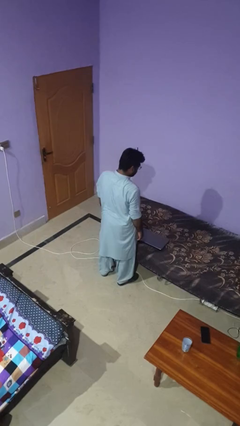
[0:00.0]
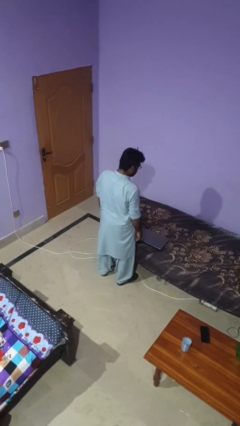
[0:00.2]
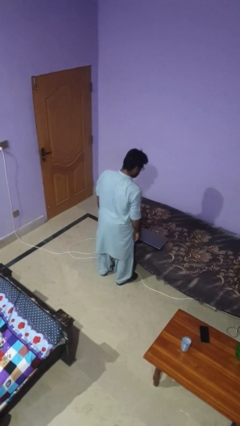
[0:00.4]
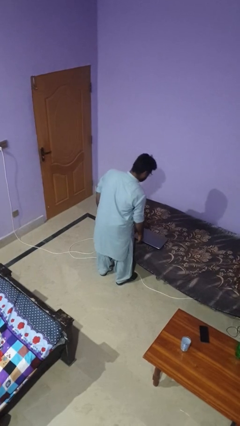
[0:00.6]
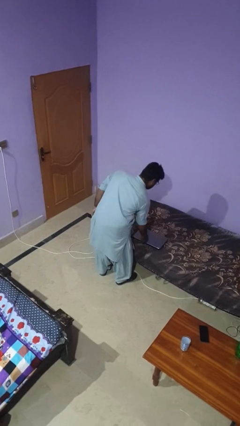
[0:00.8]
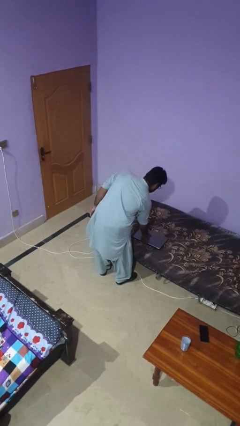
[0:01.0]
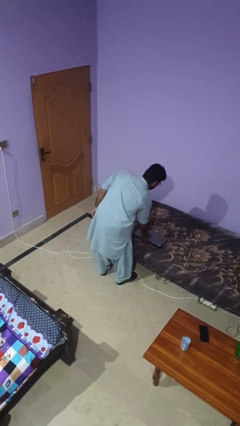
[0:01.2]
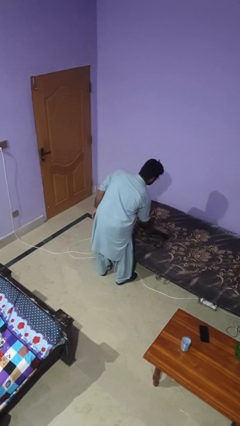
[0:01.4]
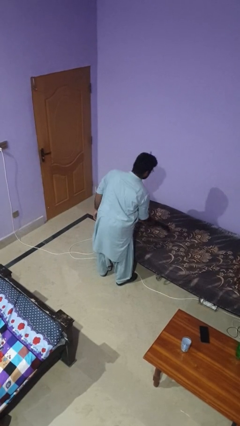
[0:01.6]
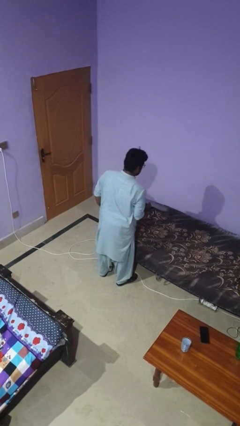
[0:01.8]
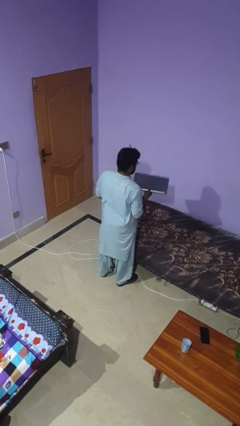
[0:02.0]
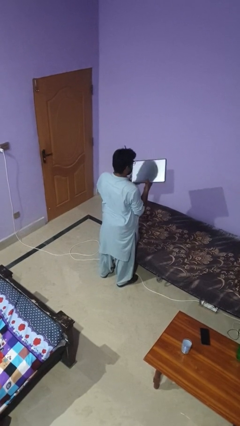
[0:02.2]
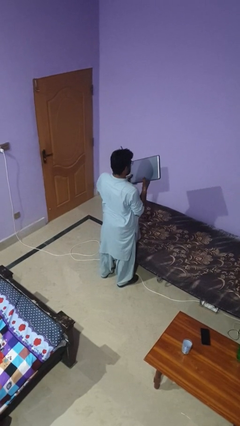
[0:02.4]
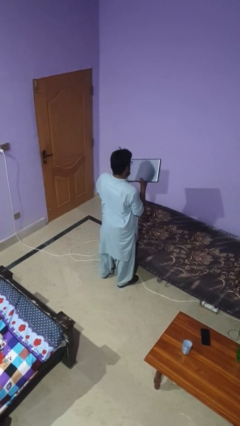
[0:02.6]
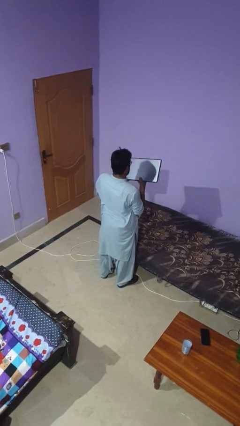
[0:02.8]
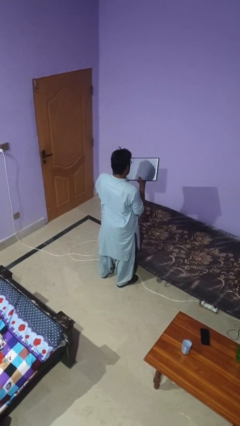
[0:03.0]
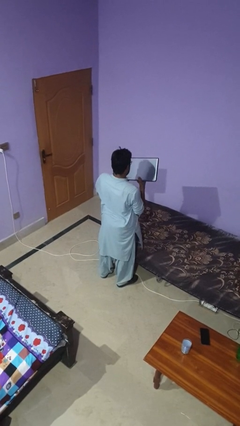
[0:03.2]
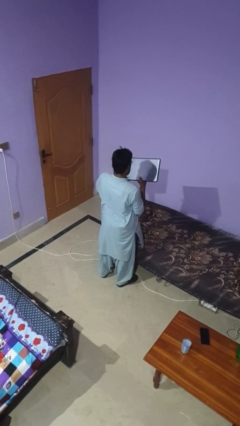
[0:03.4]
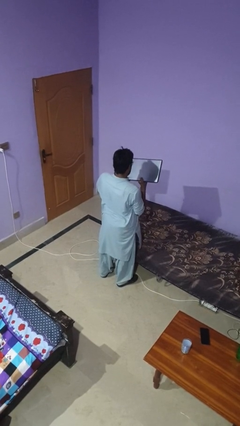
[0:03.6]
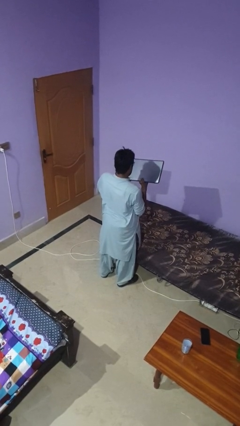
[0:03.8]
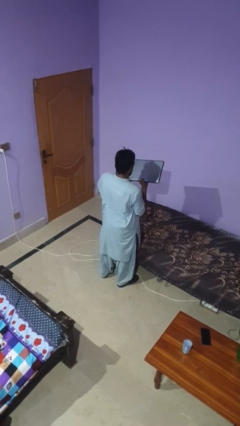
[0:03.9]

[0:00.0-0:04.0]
person picks up object from bed

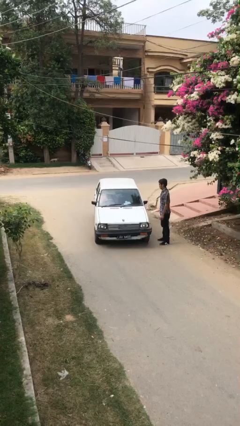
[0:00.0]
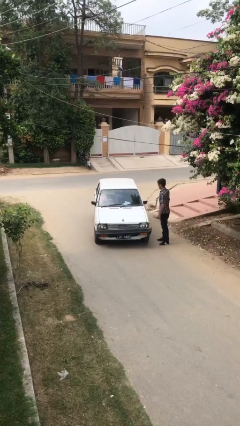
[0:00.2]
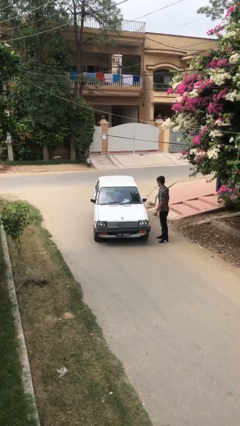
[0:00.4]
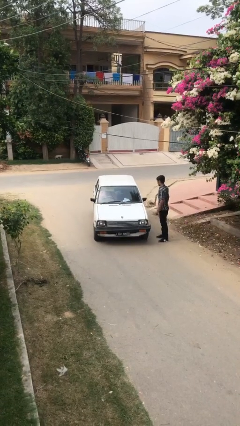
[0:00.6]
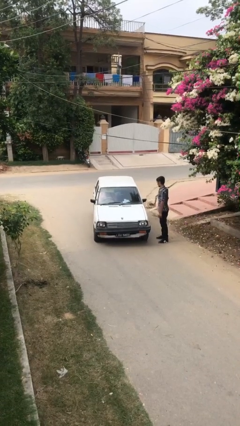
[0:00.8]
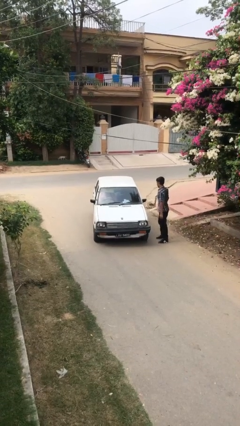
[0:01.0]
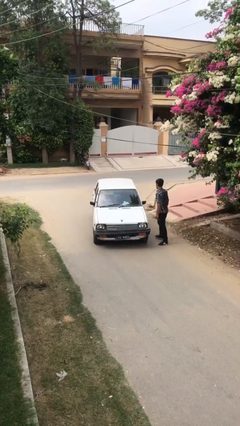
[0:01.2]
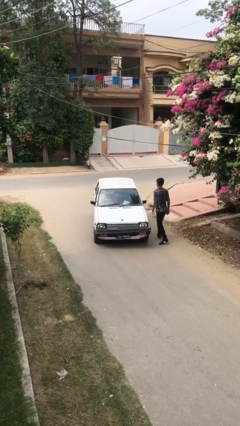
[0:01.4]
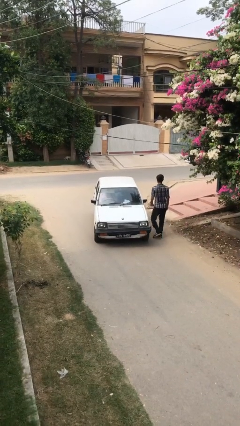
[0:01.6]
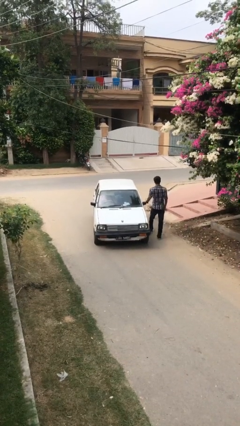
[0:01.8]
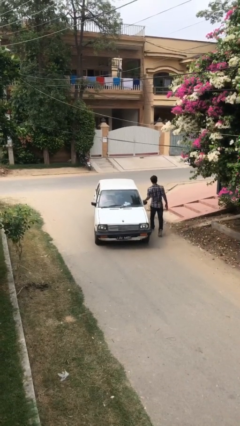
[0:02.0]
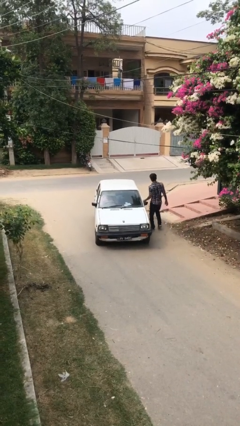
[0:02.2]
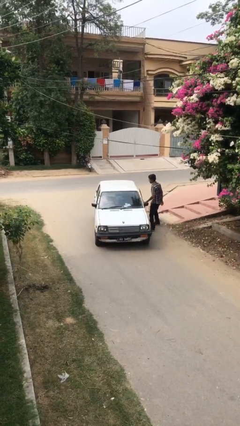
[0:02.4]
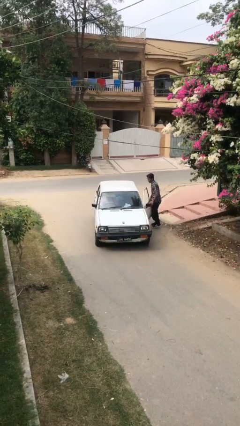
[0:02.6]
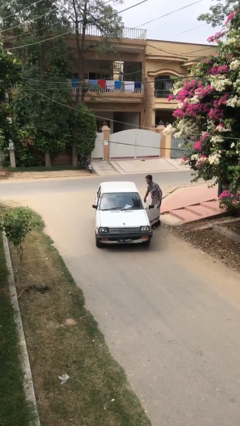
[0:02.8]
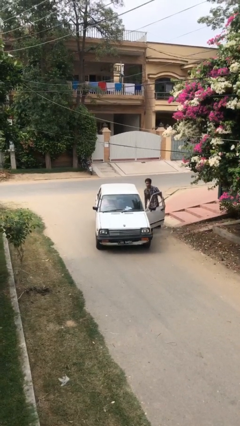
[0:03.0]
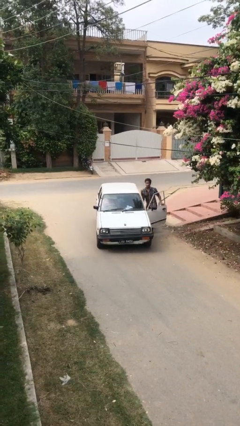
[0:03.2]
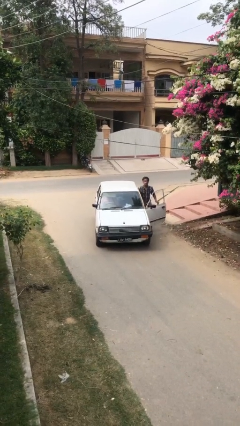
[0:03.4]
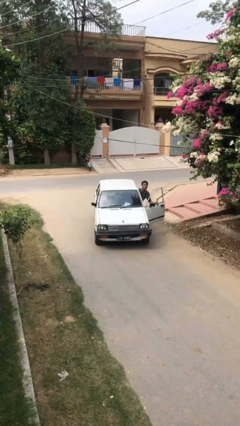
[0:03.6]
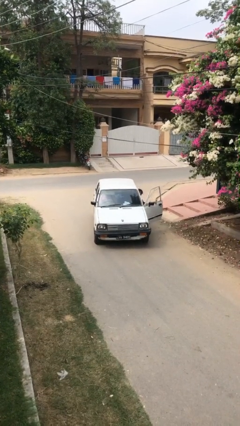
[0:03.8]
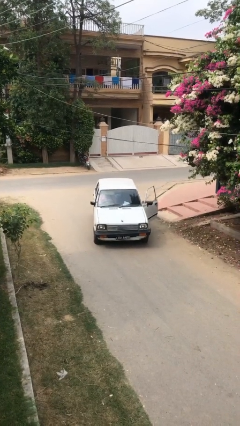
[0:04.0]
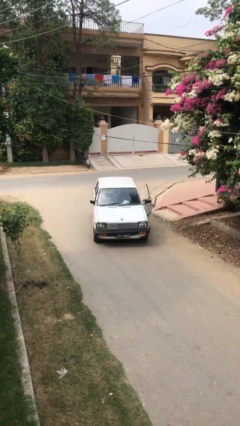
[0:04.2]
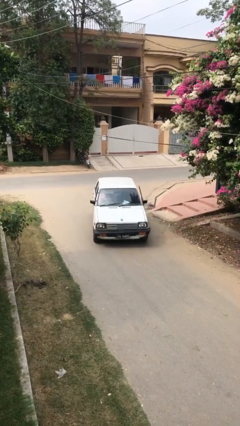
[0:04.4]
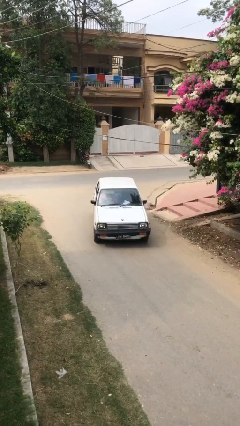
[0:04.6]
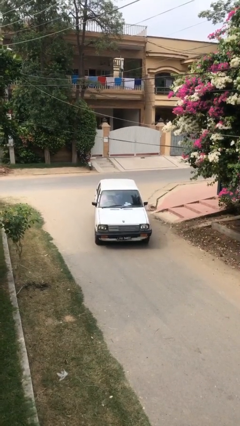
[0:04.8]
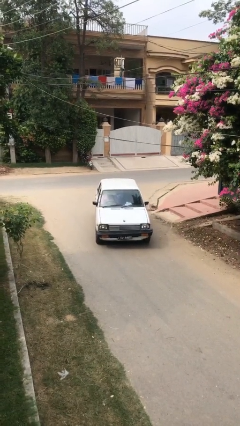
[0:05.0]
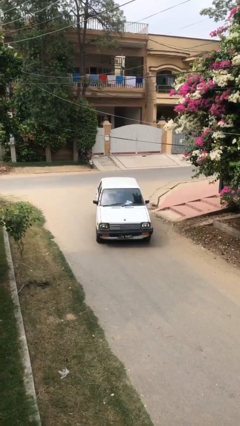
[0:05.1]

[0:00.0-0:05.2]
car picks up person

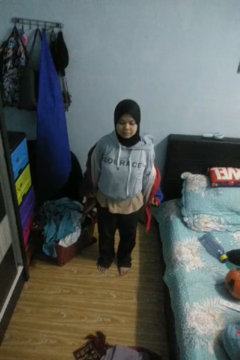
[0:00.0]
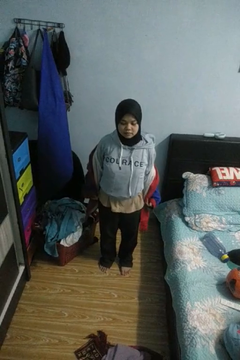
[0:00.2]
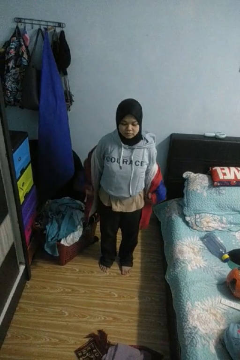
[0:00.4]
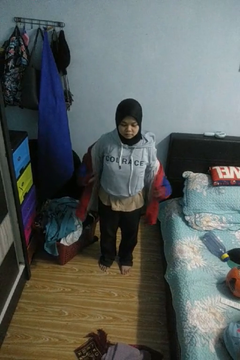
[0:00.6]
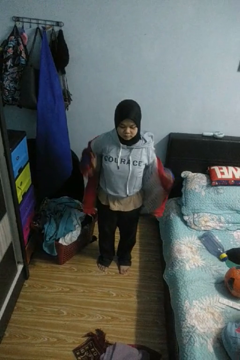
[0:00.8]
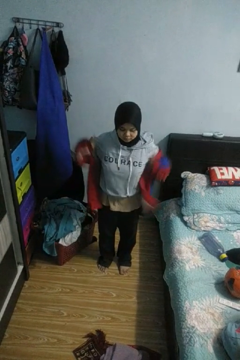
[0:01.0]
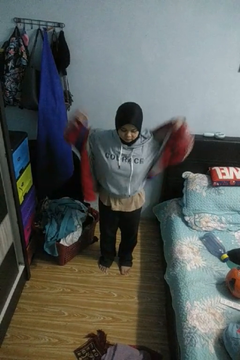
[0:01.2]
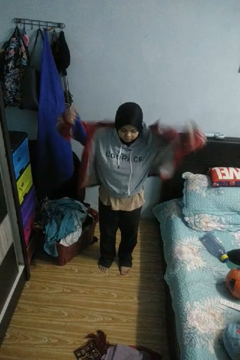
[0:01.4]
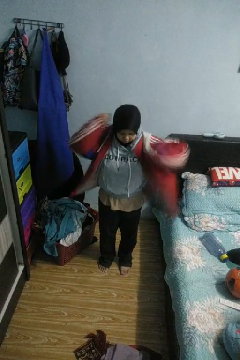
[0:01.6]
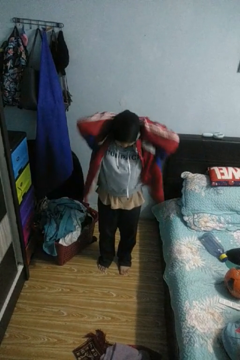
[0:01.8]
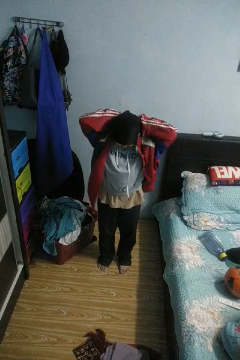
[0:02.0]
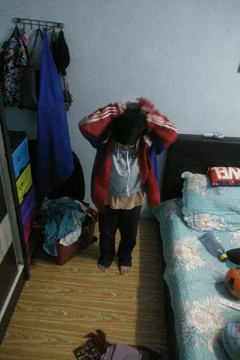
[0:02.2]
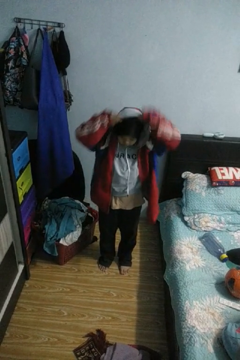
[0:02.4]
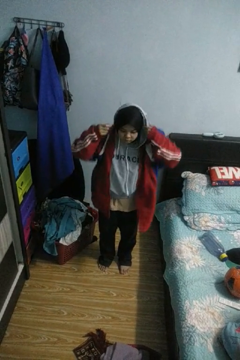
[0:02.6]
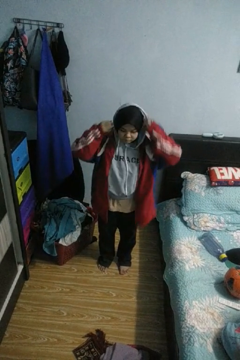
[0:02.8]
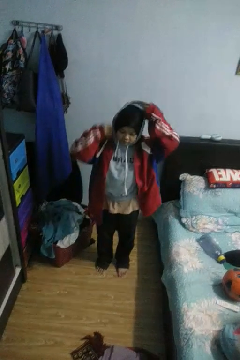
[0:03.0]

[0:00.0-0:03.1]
person puts on hoodie

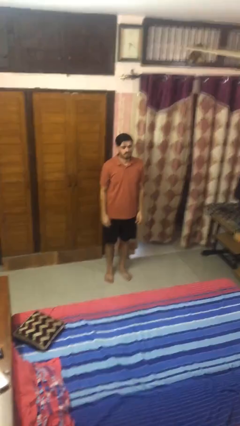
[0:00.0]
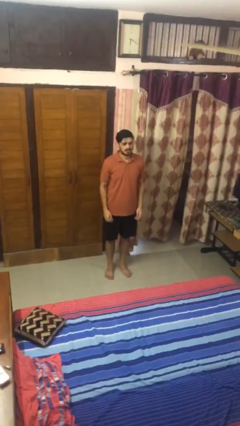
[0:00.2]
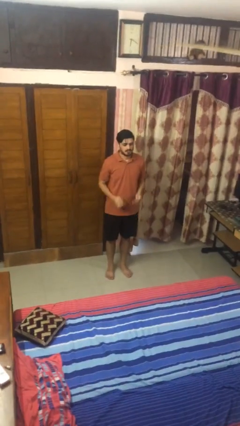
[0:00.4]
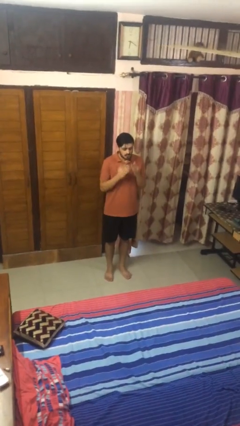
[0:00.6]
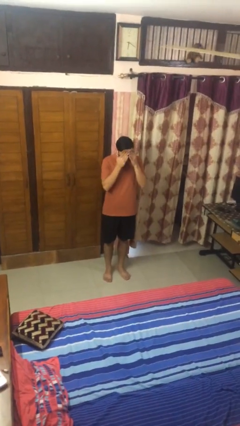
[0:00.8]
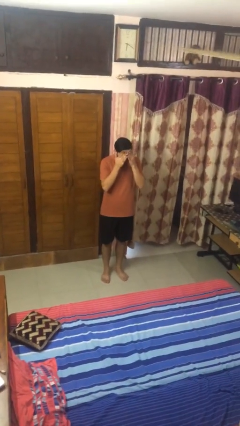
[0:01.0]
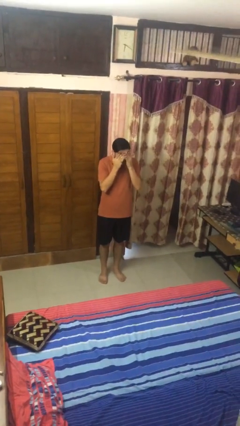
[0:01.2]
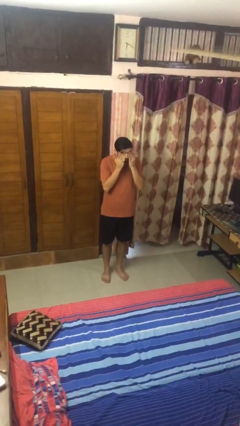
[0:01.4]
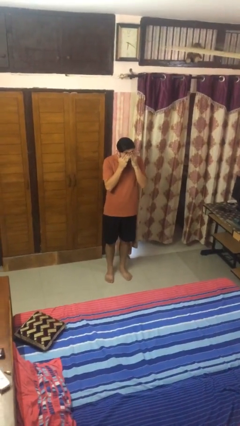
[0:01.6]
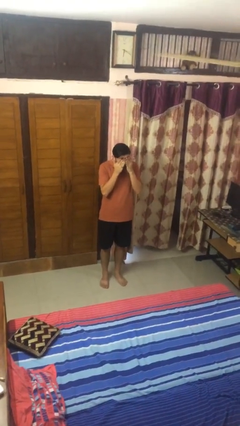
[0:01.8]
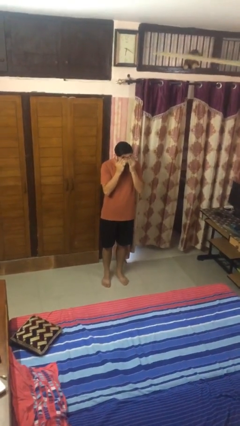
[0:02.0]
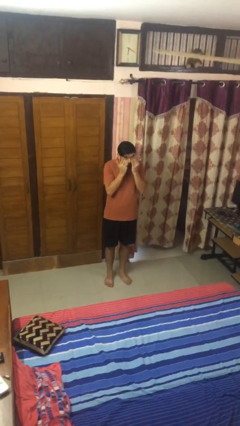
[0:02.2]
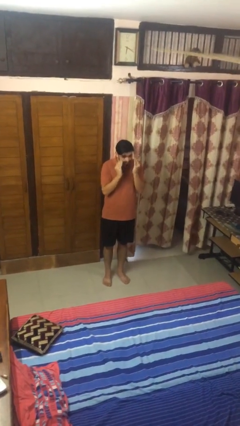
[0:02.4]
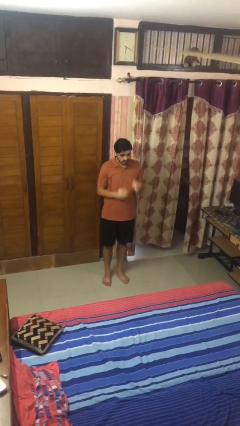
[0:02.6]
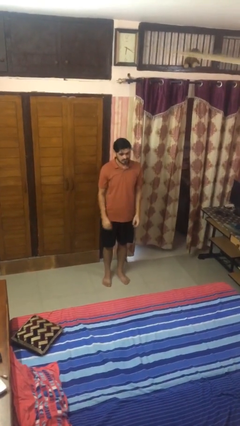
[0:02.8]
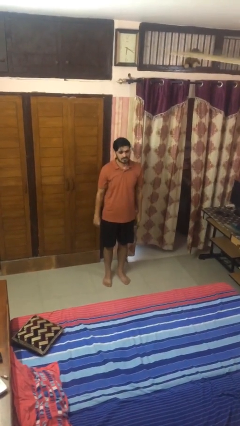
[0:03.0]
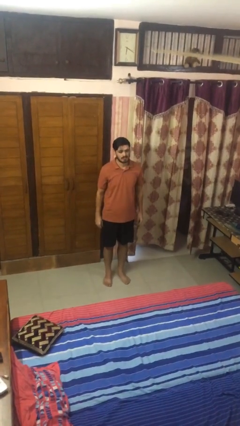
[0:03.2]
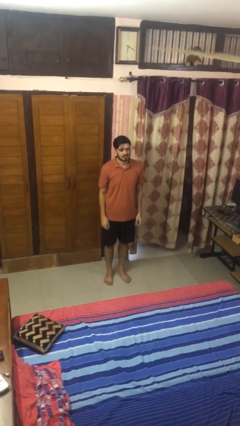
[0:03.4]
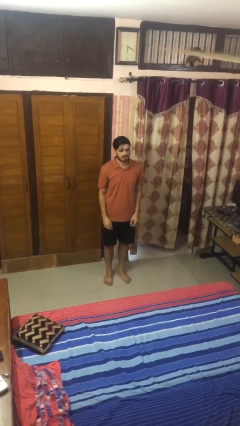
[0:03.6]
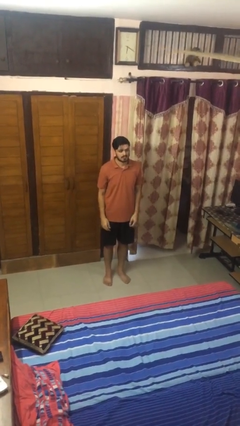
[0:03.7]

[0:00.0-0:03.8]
person rubs eyes

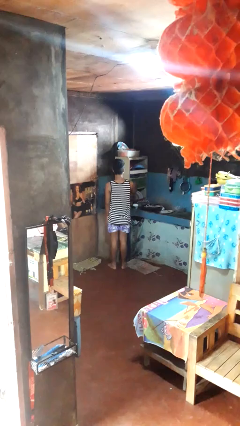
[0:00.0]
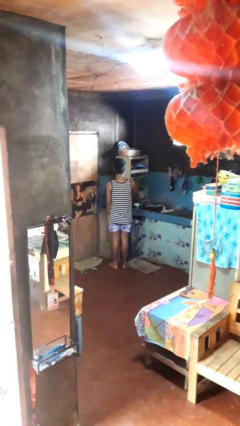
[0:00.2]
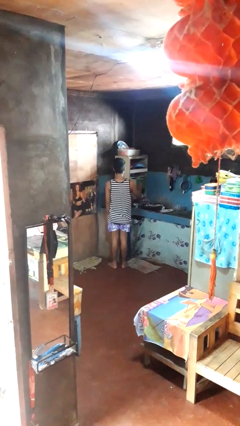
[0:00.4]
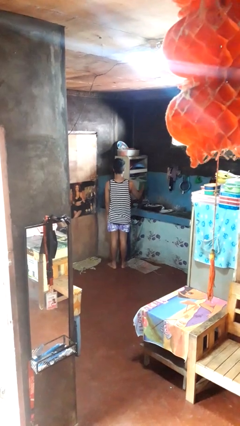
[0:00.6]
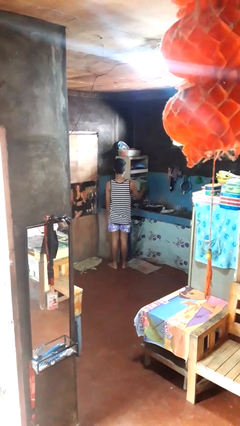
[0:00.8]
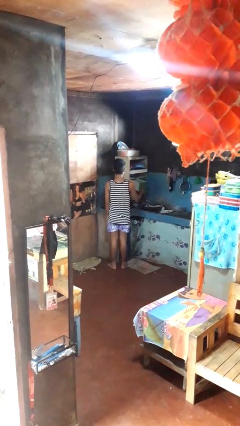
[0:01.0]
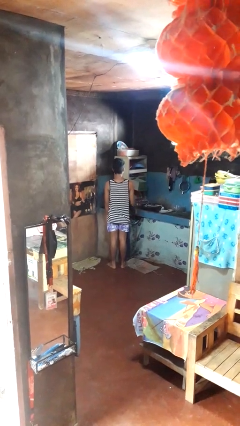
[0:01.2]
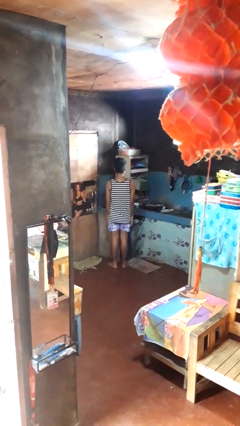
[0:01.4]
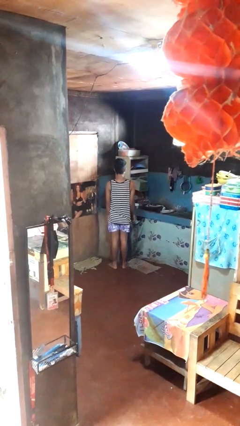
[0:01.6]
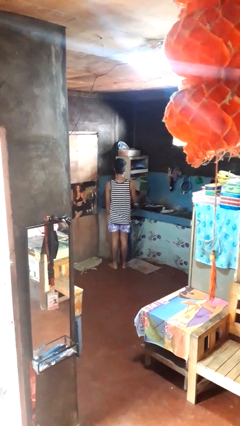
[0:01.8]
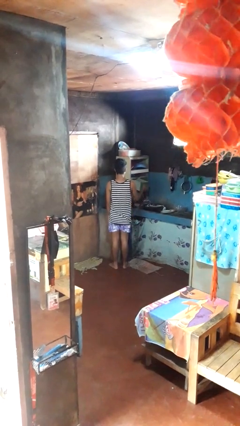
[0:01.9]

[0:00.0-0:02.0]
person opens kitchen drawer
